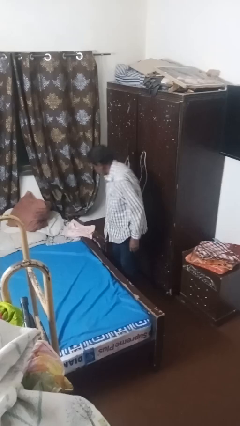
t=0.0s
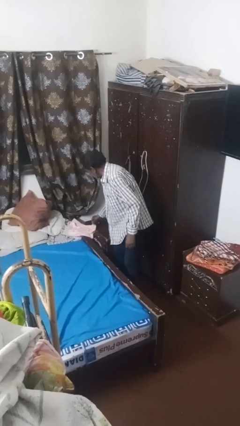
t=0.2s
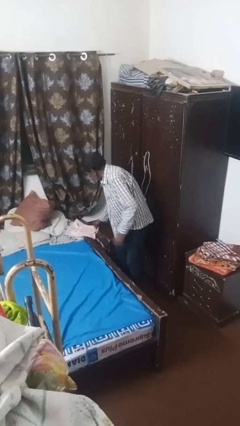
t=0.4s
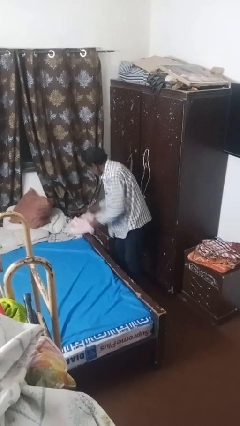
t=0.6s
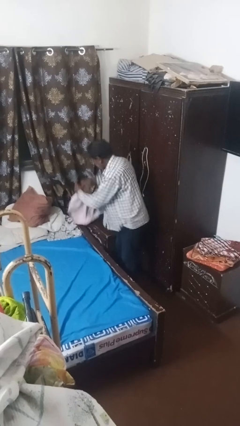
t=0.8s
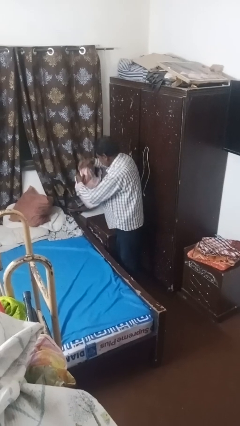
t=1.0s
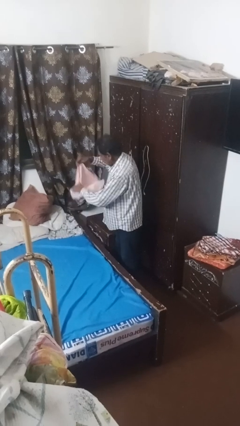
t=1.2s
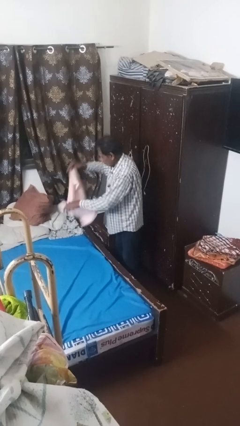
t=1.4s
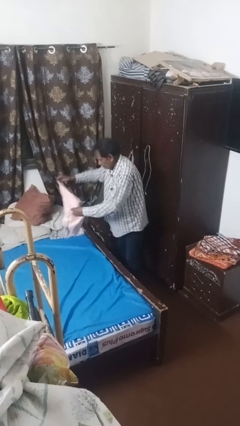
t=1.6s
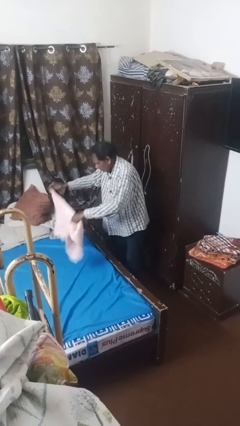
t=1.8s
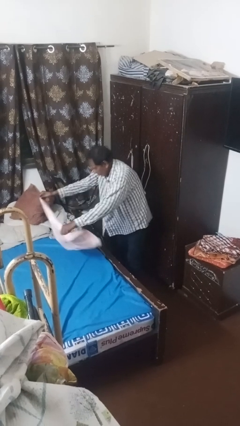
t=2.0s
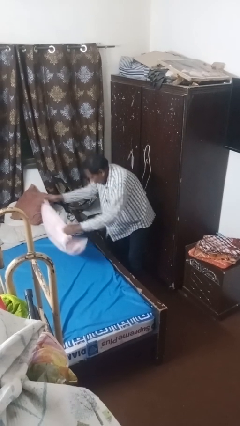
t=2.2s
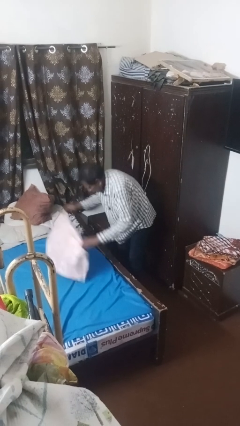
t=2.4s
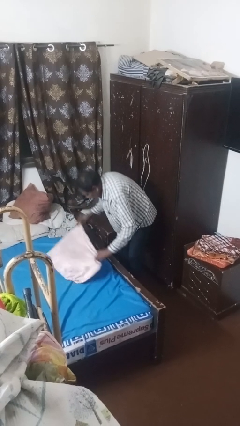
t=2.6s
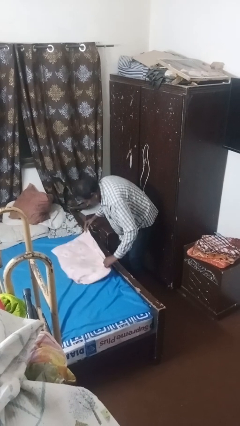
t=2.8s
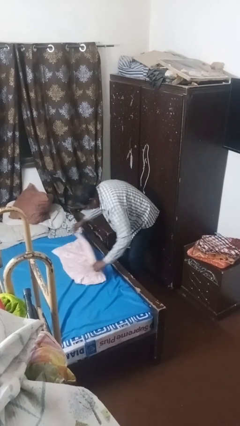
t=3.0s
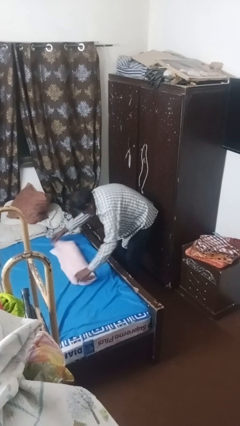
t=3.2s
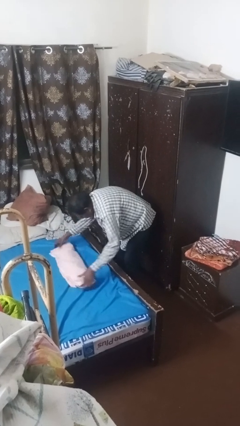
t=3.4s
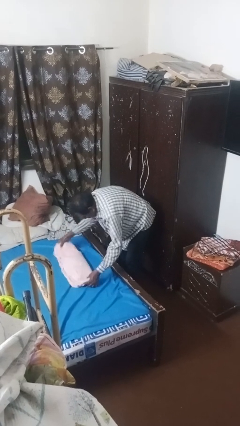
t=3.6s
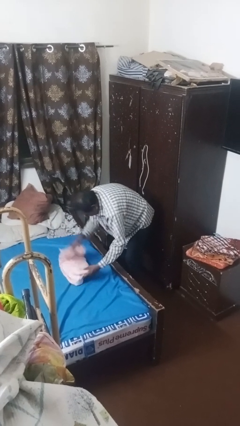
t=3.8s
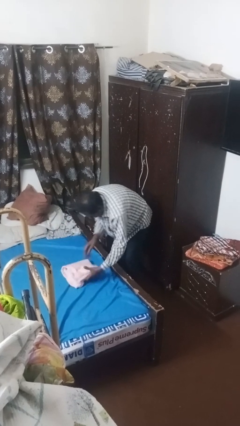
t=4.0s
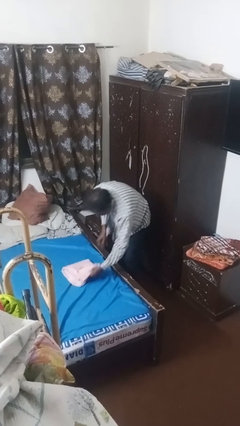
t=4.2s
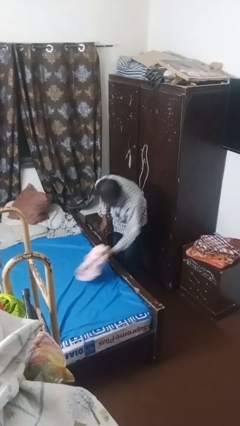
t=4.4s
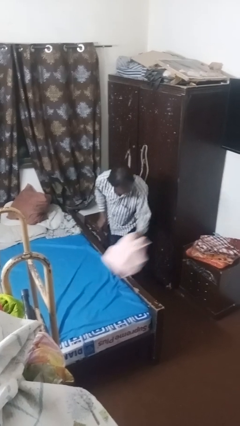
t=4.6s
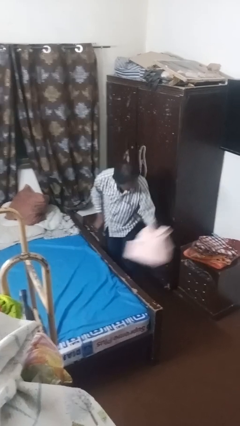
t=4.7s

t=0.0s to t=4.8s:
person folds towel

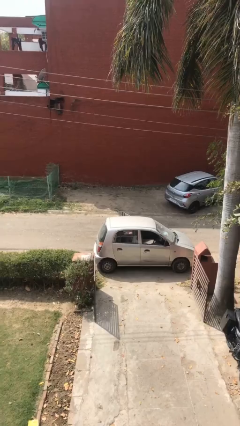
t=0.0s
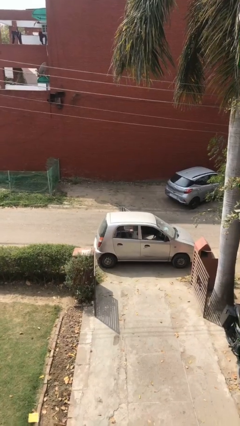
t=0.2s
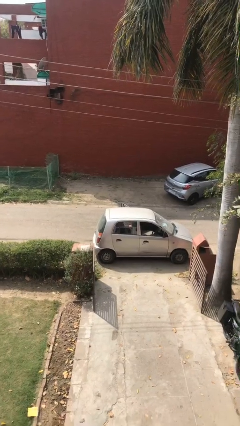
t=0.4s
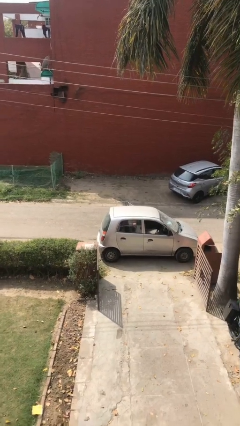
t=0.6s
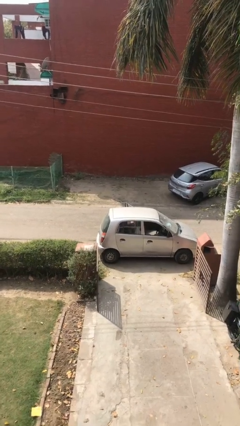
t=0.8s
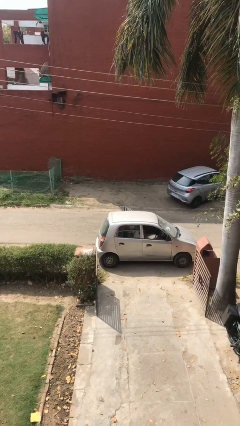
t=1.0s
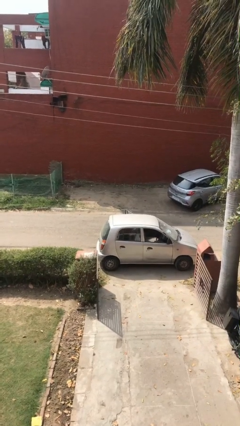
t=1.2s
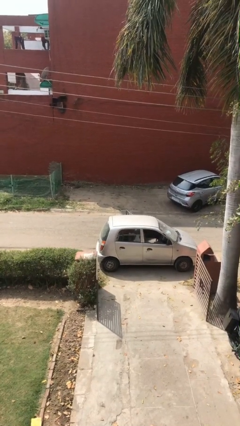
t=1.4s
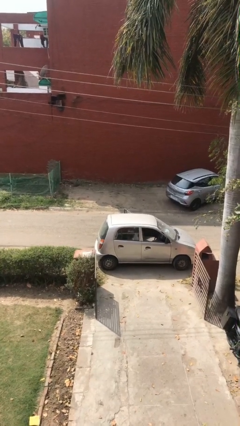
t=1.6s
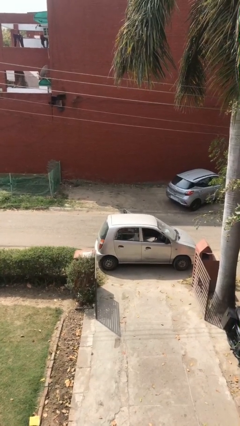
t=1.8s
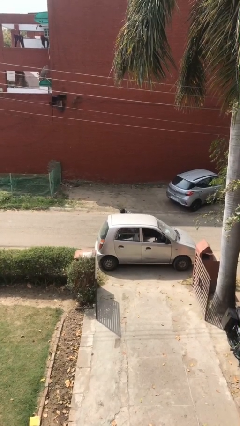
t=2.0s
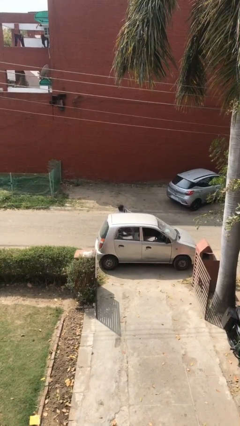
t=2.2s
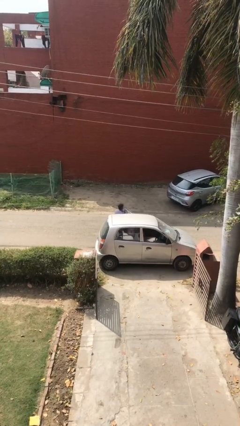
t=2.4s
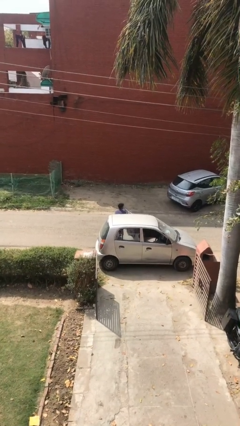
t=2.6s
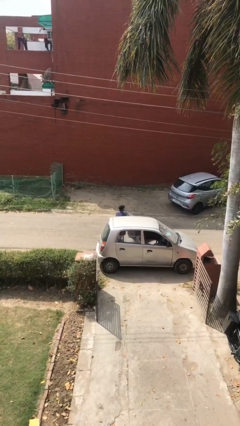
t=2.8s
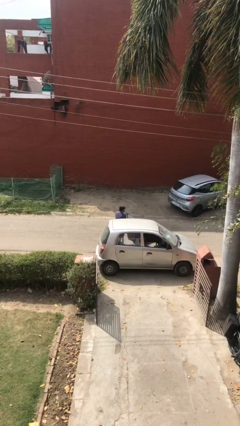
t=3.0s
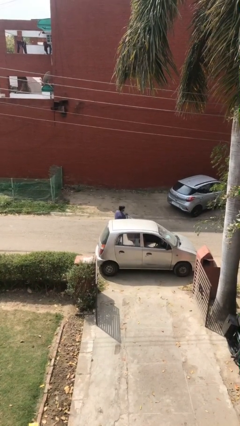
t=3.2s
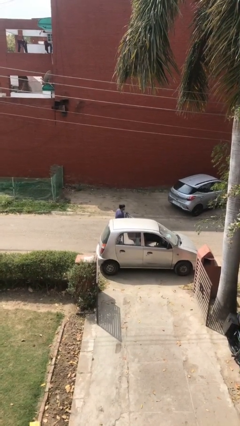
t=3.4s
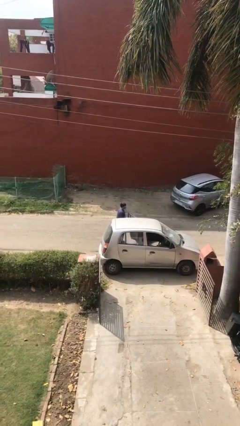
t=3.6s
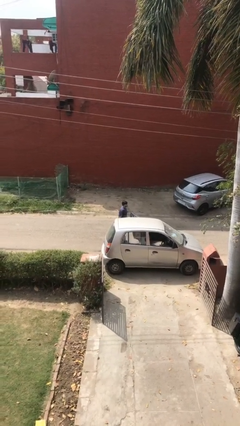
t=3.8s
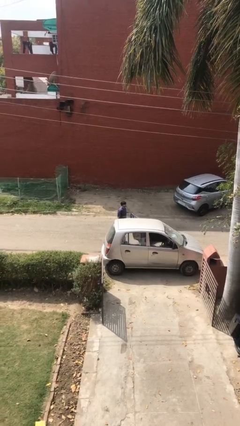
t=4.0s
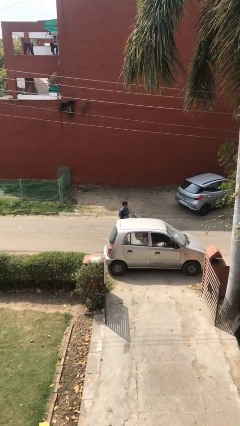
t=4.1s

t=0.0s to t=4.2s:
person exits car

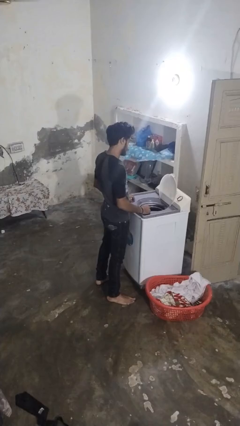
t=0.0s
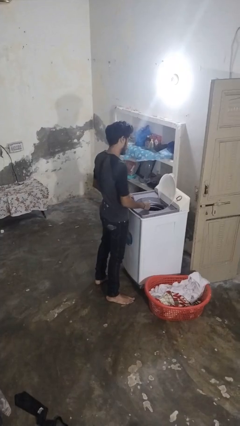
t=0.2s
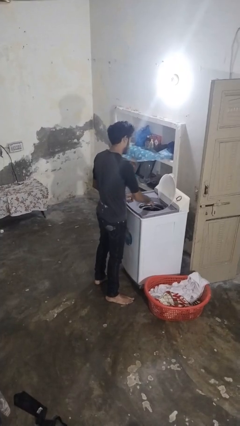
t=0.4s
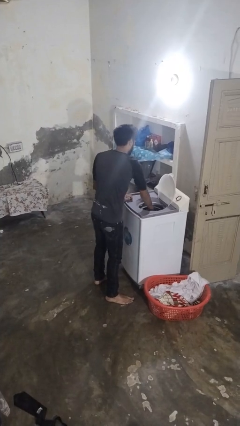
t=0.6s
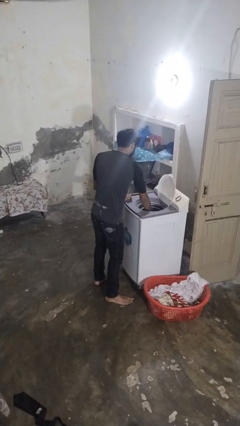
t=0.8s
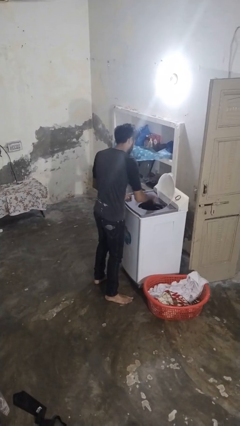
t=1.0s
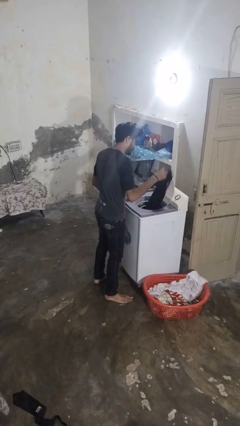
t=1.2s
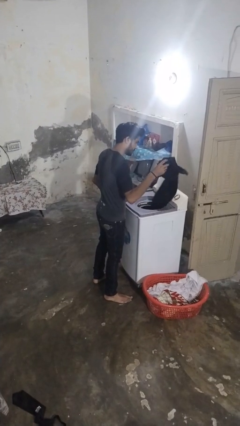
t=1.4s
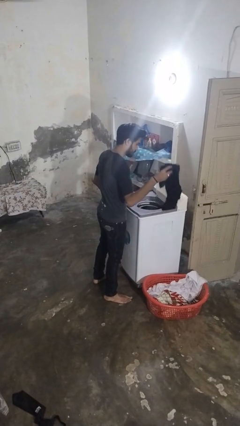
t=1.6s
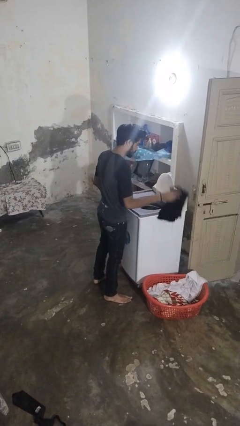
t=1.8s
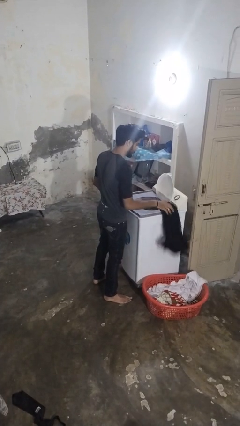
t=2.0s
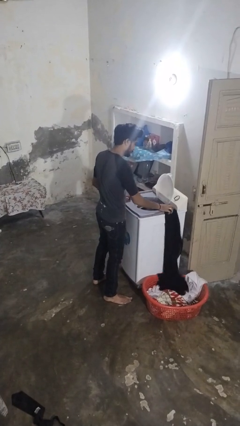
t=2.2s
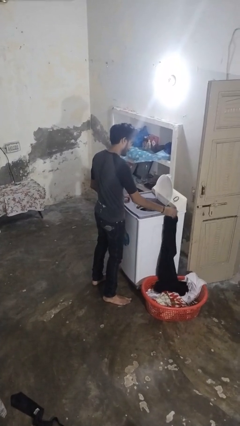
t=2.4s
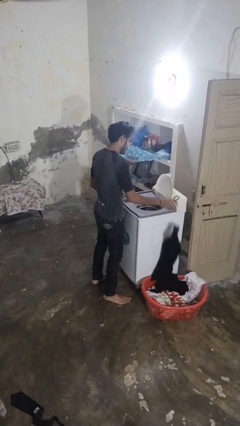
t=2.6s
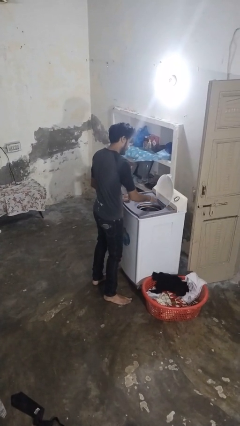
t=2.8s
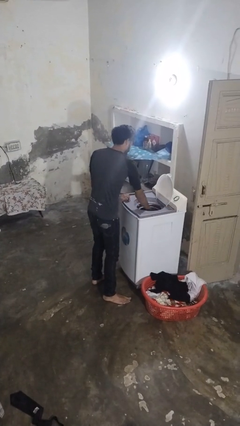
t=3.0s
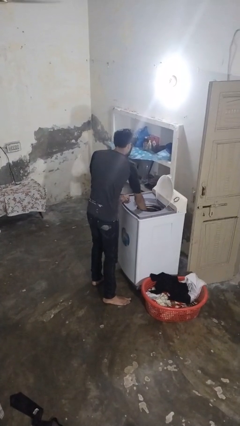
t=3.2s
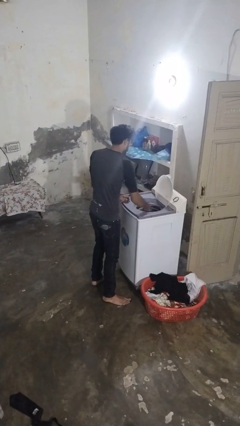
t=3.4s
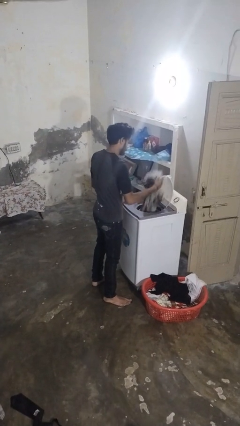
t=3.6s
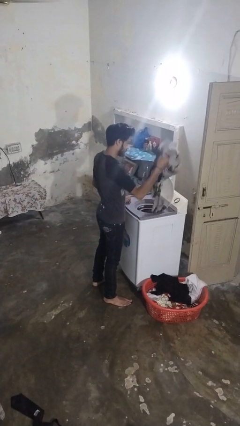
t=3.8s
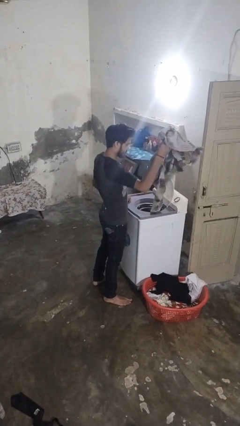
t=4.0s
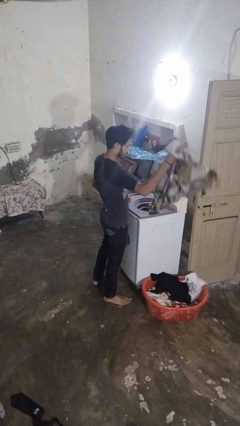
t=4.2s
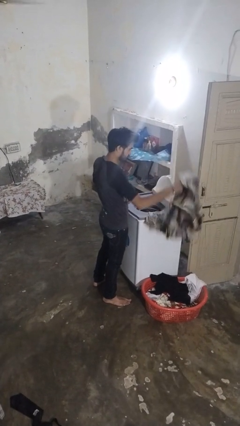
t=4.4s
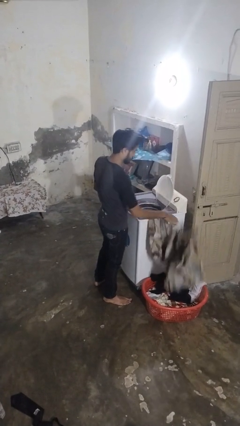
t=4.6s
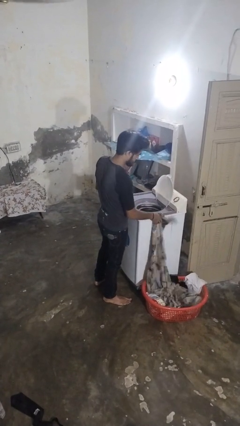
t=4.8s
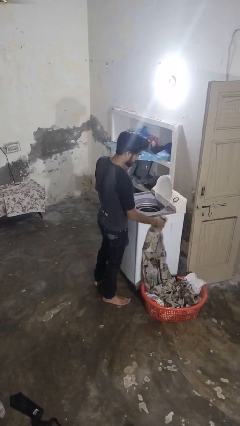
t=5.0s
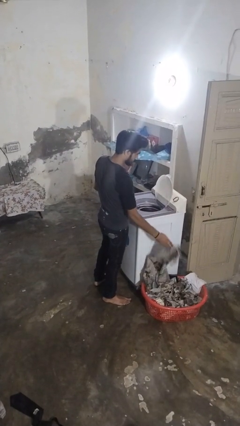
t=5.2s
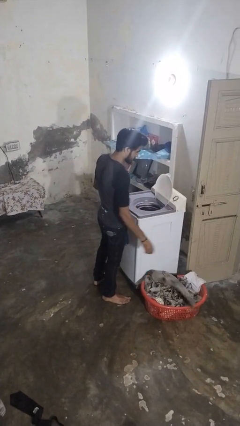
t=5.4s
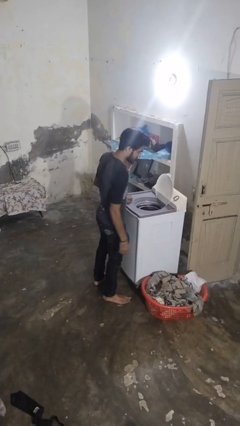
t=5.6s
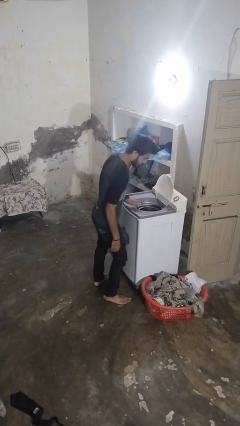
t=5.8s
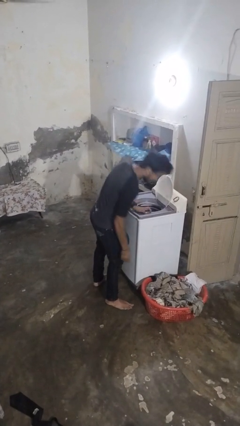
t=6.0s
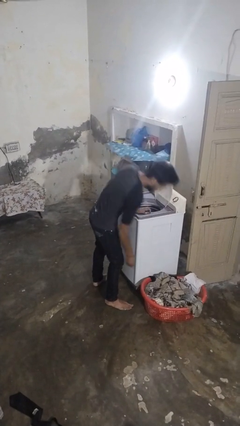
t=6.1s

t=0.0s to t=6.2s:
person unloads dryer

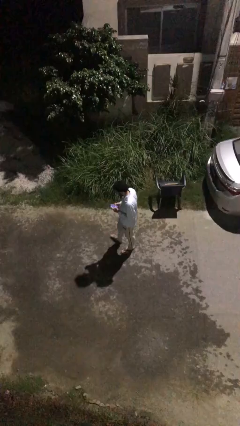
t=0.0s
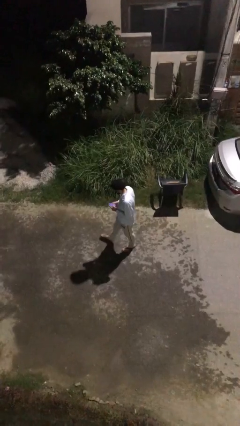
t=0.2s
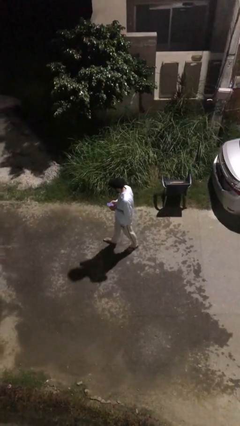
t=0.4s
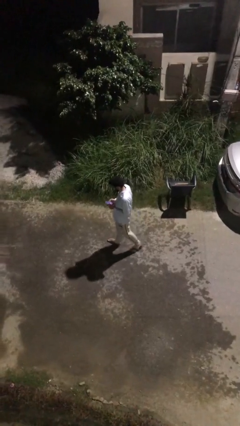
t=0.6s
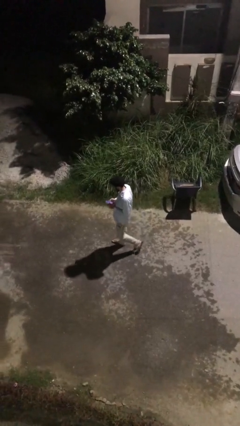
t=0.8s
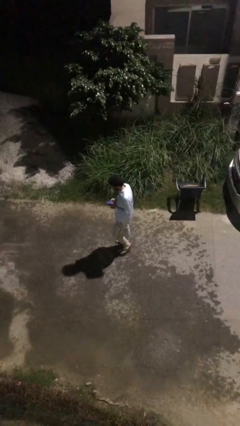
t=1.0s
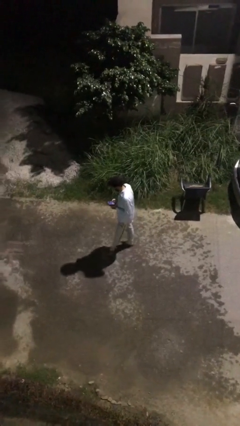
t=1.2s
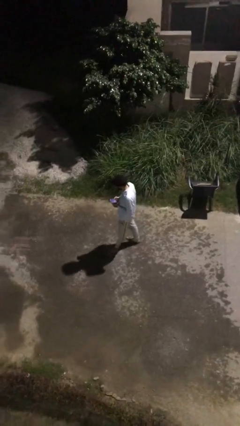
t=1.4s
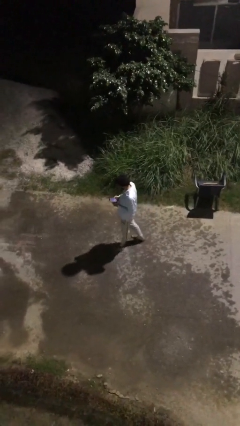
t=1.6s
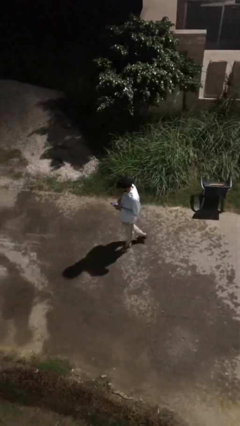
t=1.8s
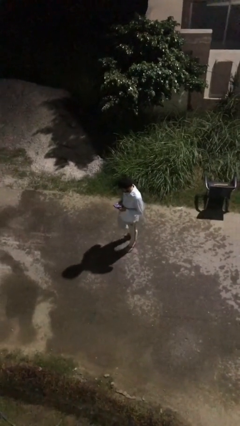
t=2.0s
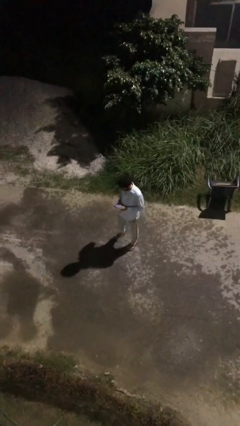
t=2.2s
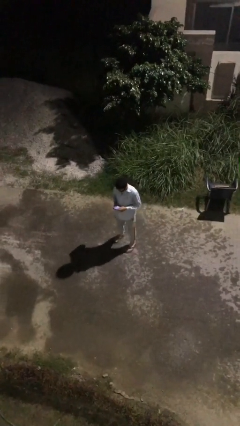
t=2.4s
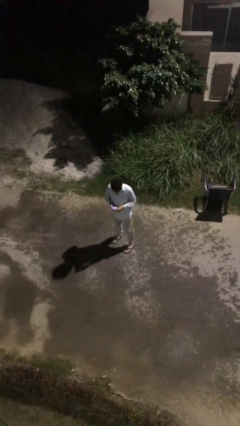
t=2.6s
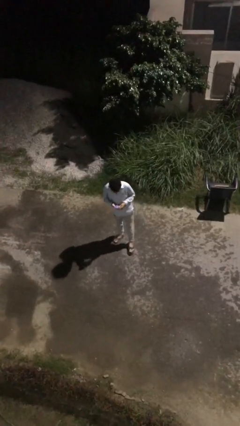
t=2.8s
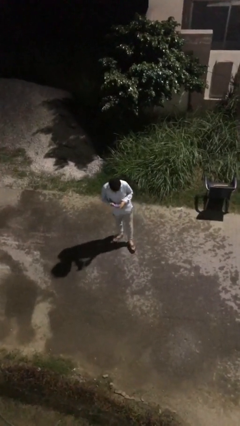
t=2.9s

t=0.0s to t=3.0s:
person texts on phone
